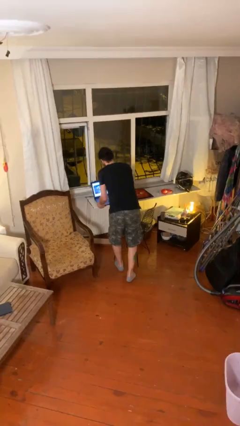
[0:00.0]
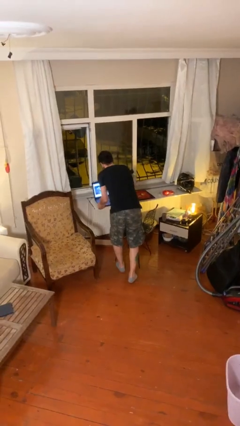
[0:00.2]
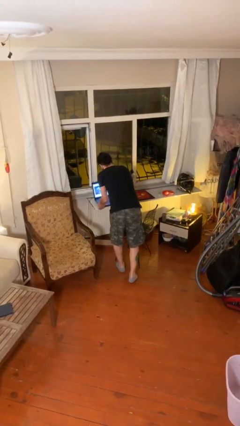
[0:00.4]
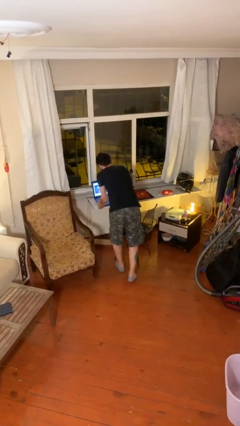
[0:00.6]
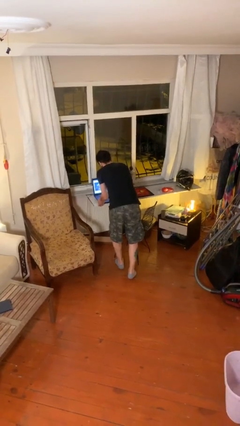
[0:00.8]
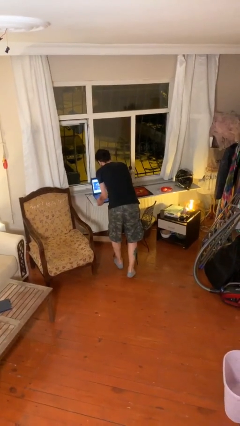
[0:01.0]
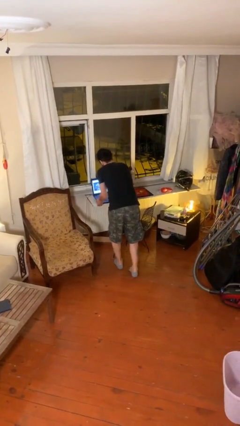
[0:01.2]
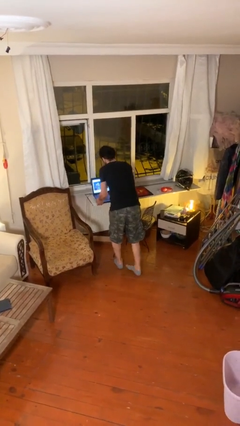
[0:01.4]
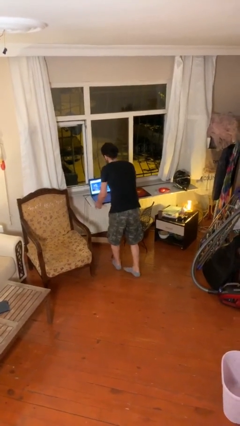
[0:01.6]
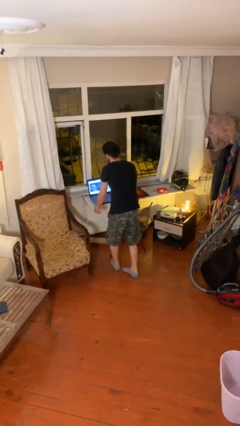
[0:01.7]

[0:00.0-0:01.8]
person puts down object on table

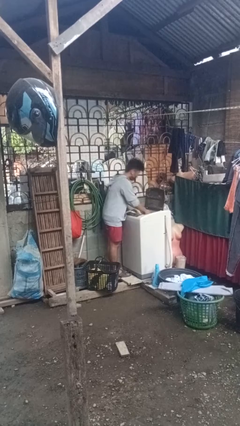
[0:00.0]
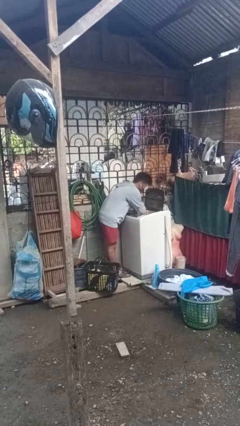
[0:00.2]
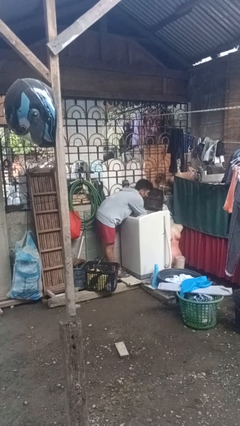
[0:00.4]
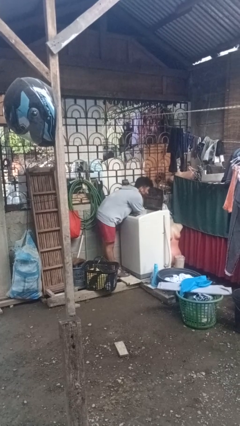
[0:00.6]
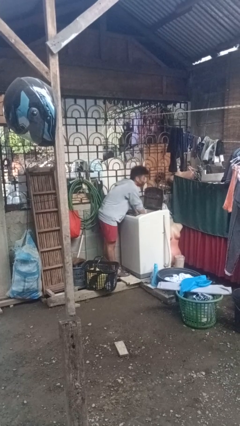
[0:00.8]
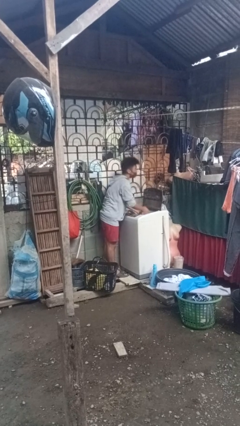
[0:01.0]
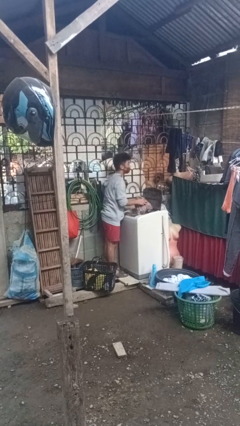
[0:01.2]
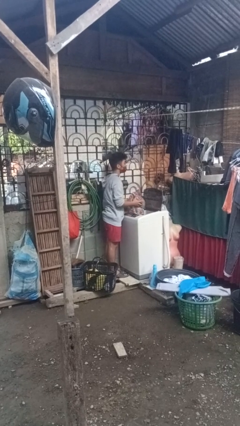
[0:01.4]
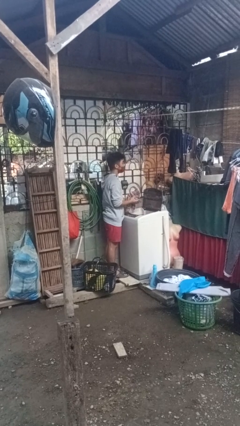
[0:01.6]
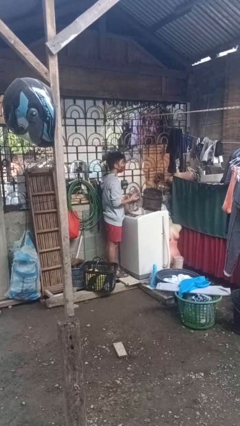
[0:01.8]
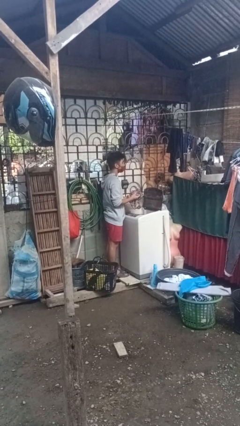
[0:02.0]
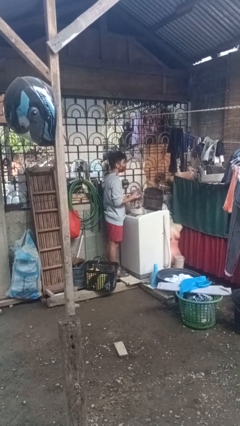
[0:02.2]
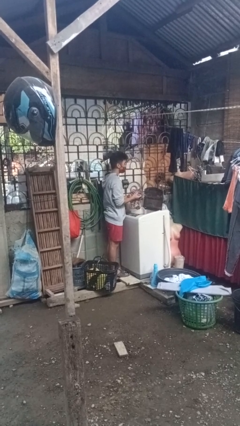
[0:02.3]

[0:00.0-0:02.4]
person unloads clotheswasher

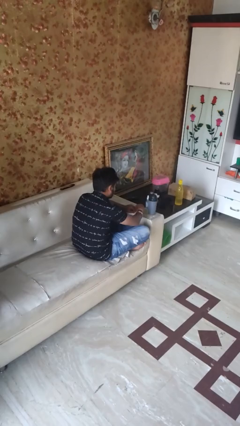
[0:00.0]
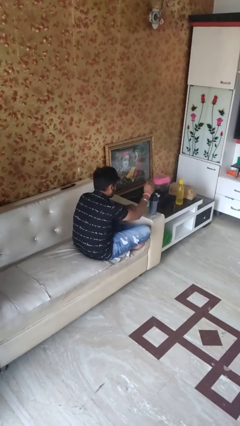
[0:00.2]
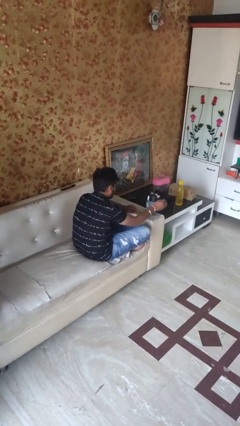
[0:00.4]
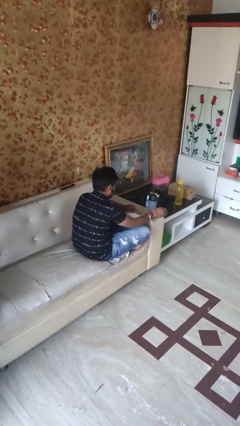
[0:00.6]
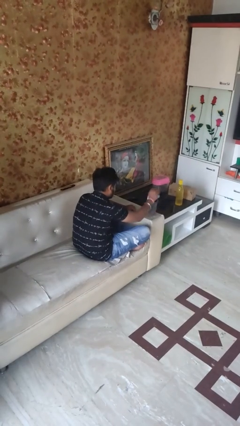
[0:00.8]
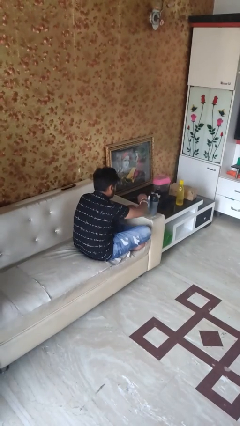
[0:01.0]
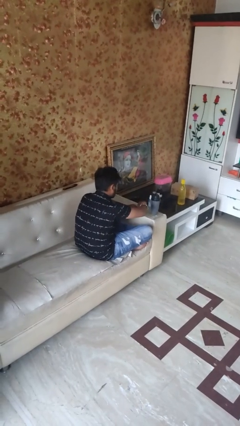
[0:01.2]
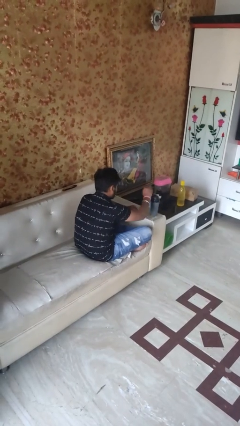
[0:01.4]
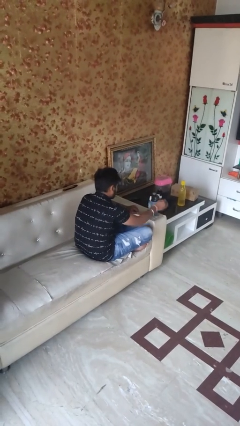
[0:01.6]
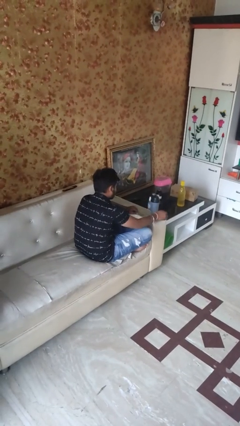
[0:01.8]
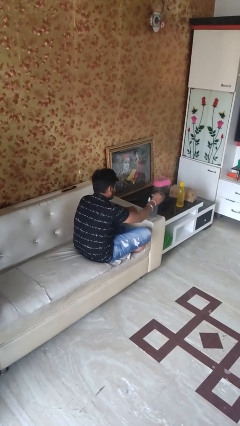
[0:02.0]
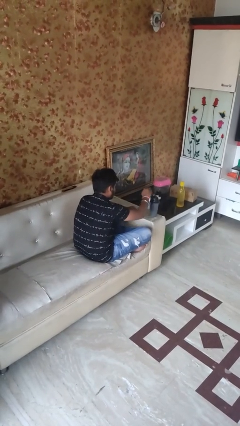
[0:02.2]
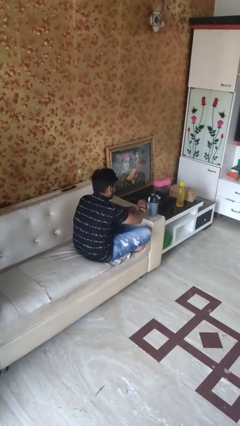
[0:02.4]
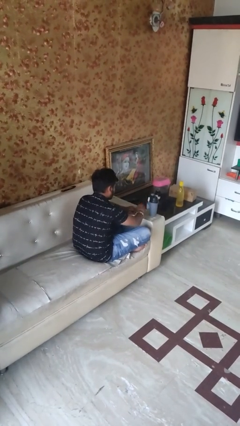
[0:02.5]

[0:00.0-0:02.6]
person waves hand over object

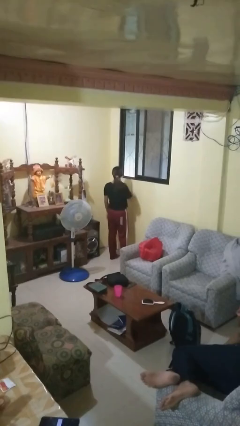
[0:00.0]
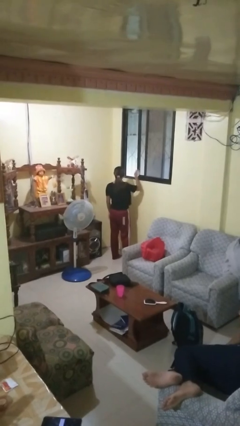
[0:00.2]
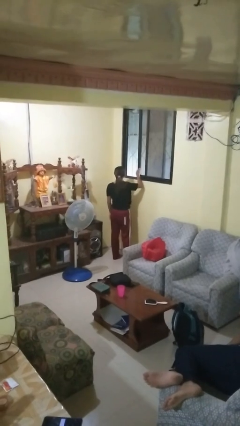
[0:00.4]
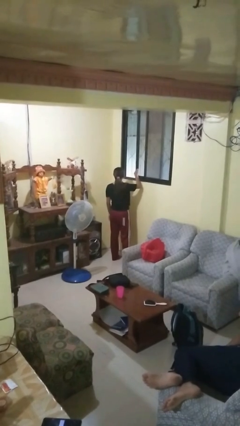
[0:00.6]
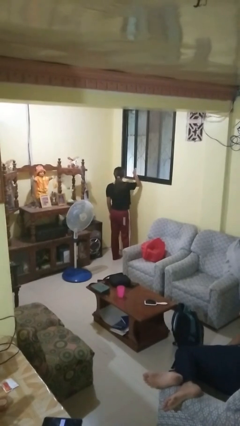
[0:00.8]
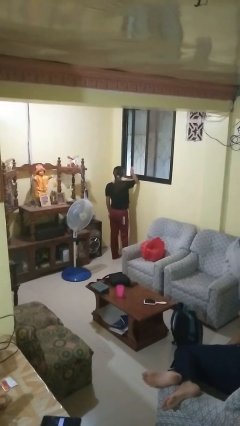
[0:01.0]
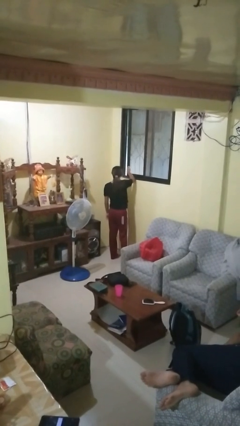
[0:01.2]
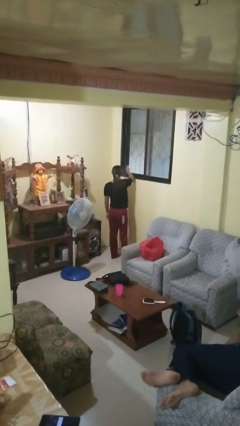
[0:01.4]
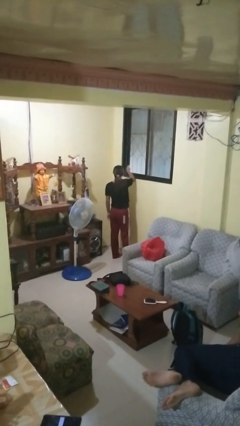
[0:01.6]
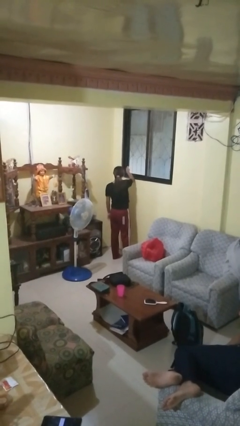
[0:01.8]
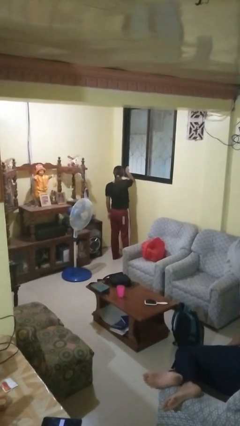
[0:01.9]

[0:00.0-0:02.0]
person closes home window

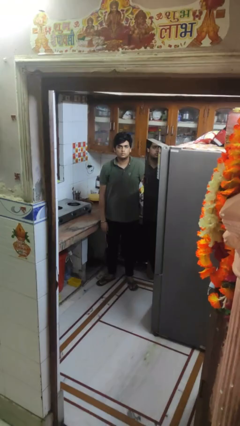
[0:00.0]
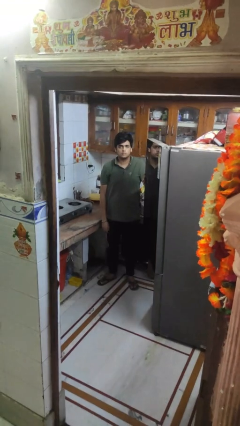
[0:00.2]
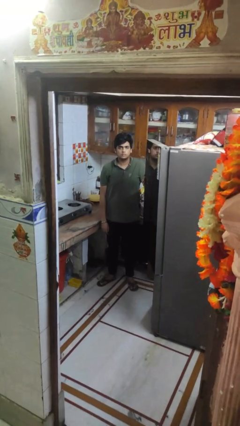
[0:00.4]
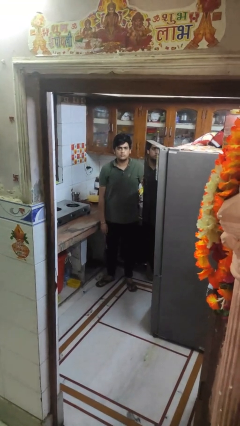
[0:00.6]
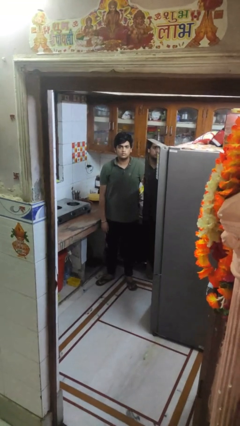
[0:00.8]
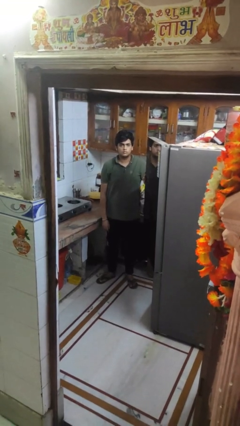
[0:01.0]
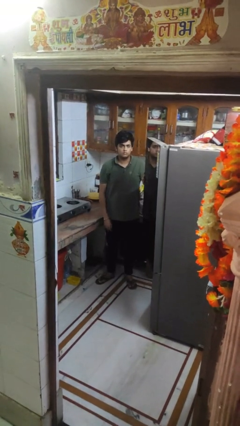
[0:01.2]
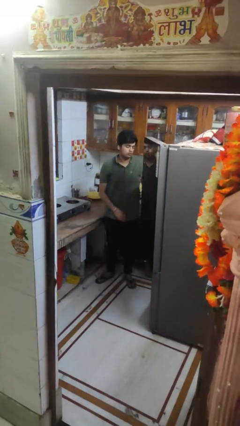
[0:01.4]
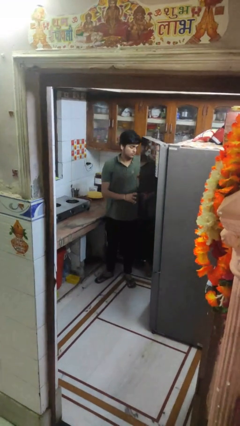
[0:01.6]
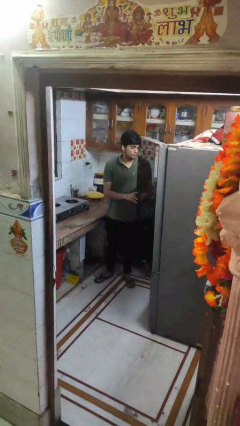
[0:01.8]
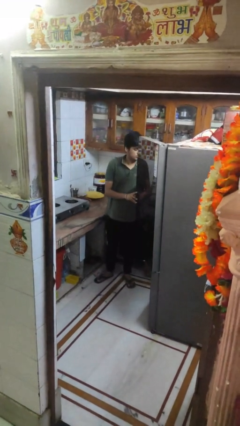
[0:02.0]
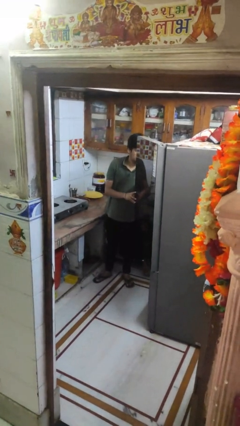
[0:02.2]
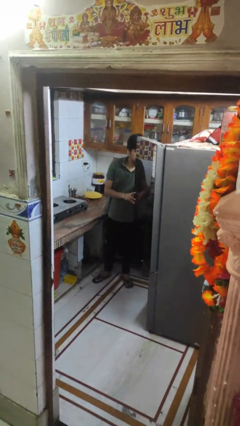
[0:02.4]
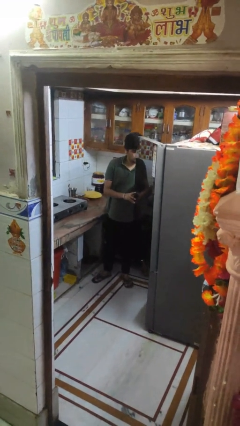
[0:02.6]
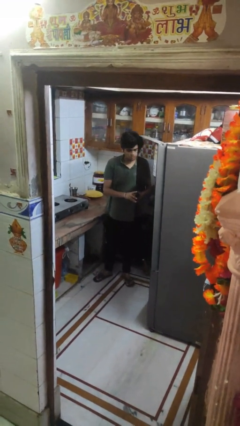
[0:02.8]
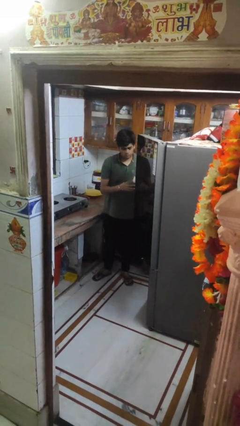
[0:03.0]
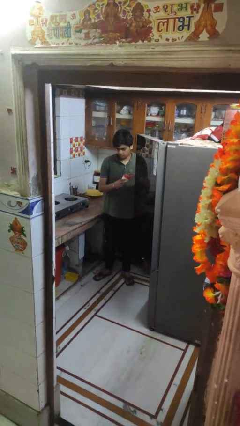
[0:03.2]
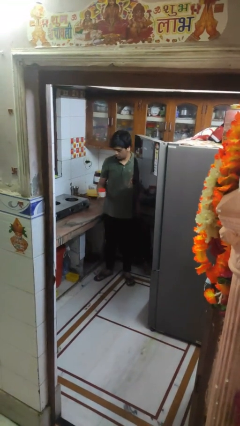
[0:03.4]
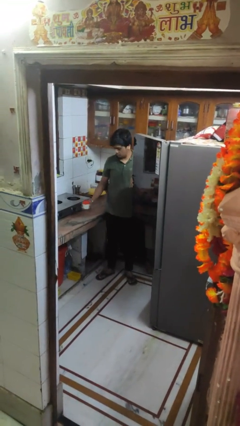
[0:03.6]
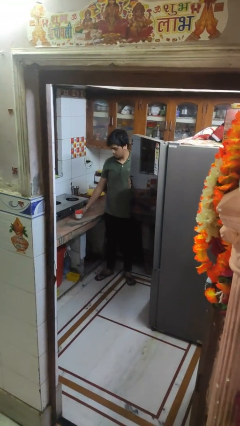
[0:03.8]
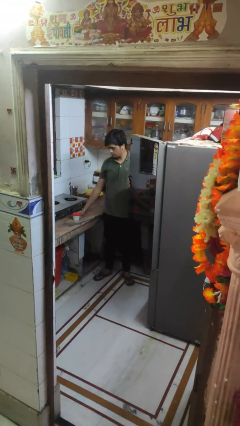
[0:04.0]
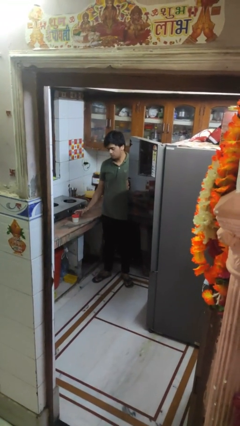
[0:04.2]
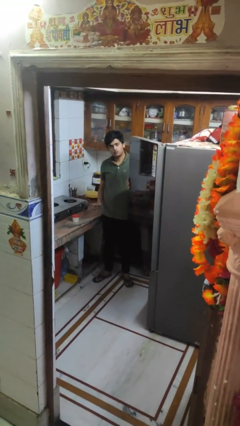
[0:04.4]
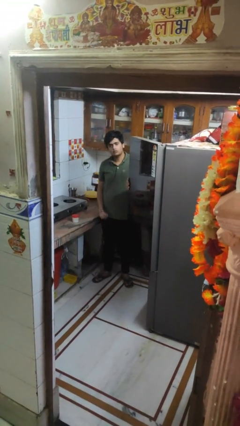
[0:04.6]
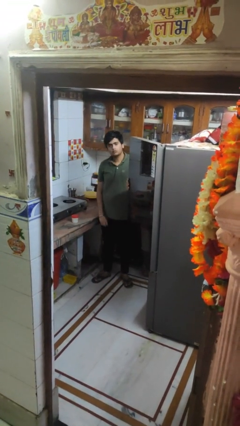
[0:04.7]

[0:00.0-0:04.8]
person takes object from refrigerator

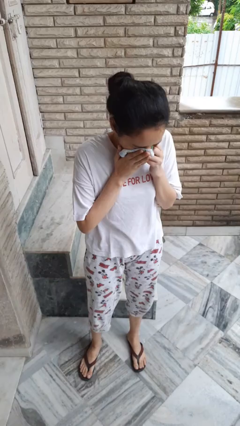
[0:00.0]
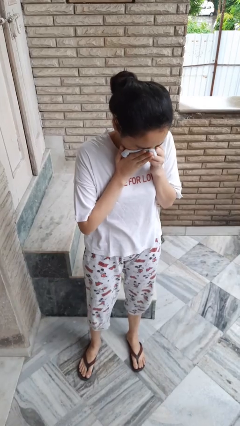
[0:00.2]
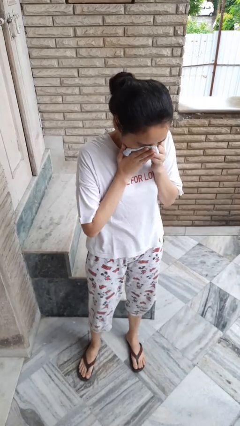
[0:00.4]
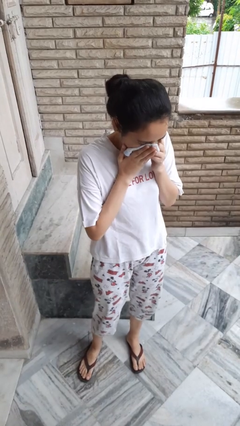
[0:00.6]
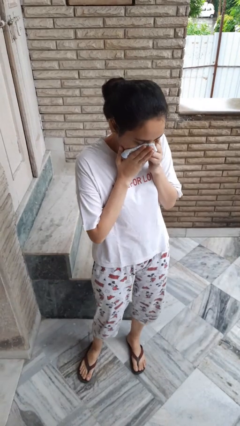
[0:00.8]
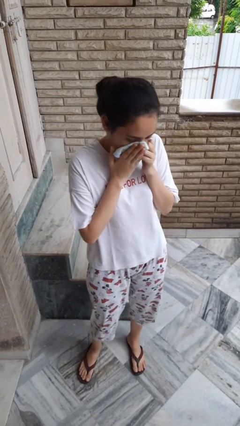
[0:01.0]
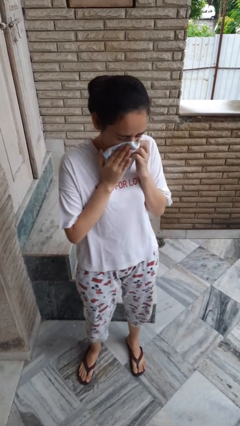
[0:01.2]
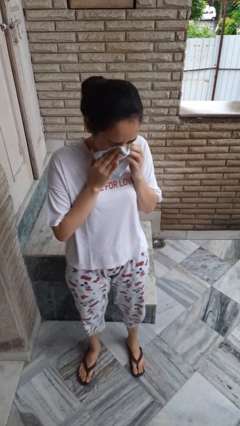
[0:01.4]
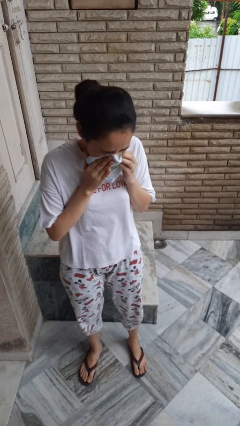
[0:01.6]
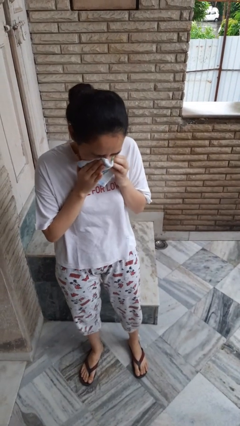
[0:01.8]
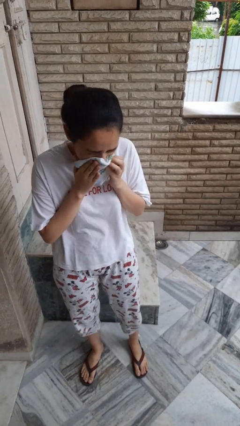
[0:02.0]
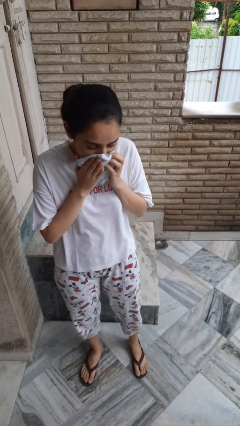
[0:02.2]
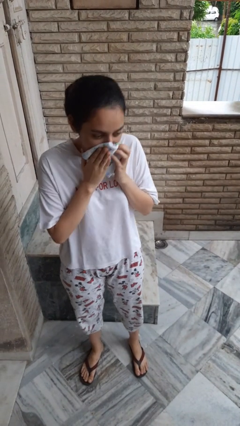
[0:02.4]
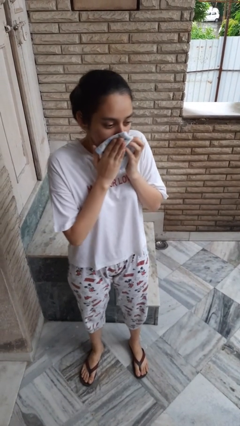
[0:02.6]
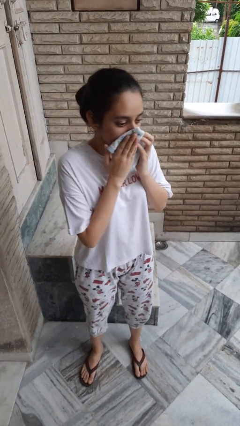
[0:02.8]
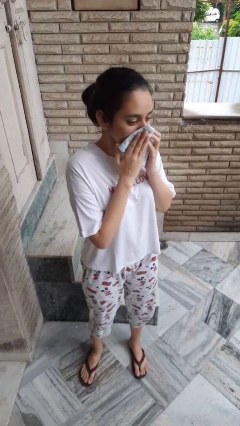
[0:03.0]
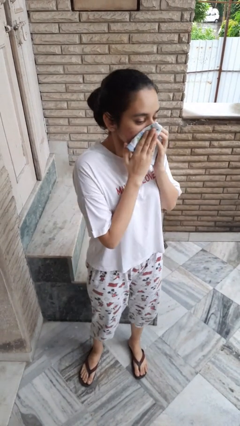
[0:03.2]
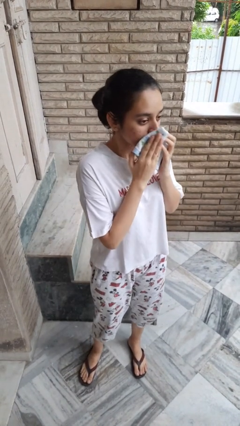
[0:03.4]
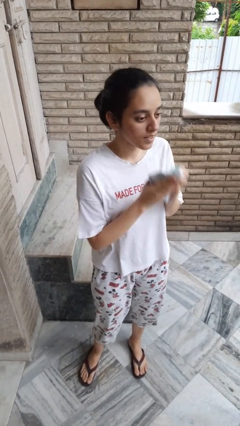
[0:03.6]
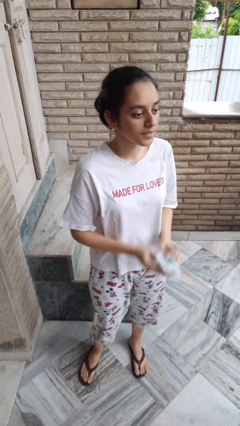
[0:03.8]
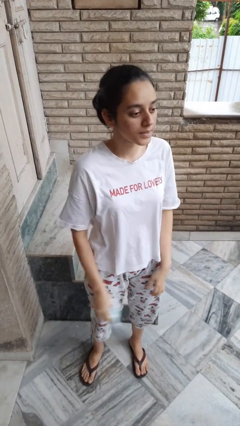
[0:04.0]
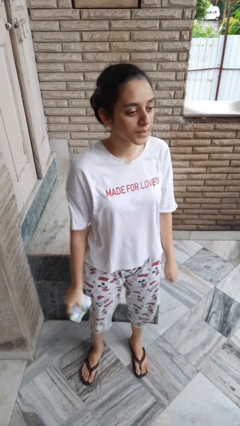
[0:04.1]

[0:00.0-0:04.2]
person blows nose
